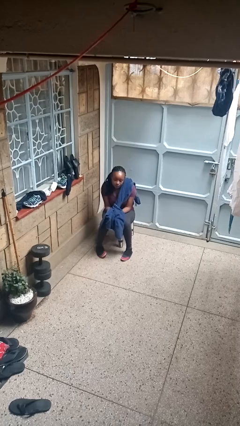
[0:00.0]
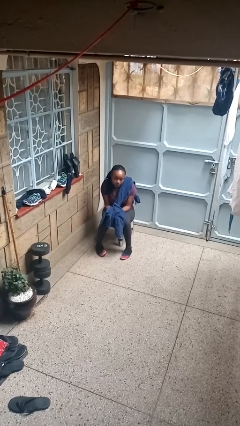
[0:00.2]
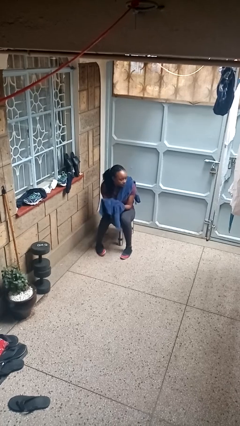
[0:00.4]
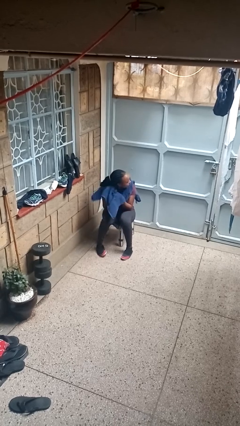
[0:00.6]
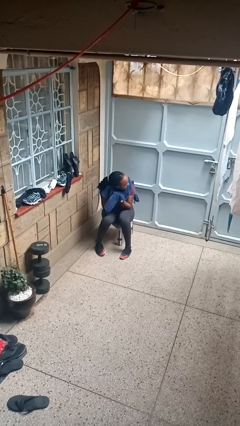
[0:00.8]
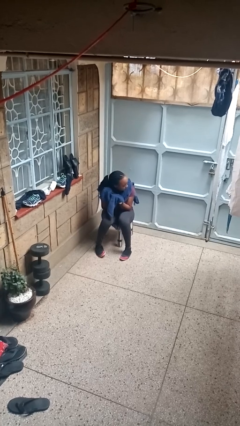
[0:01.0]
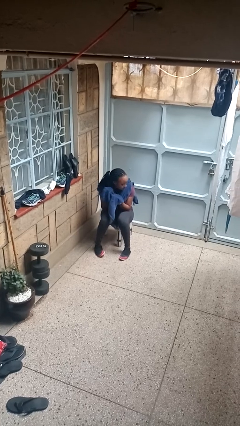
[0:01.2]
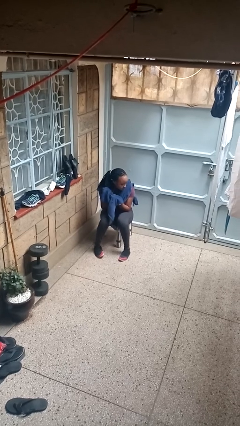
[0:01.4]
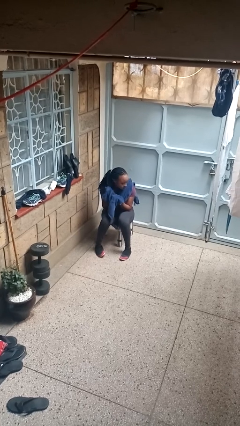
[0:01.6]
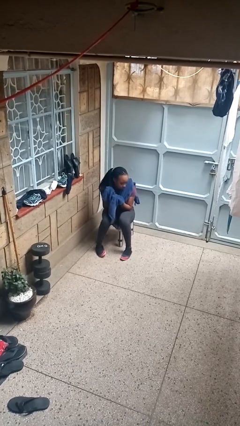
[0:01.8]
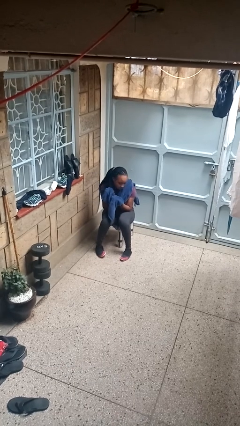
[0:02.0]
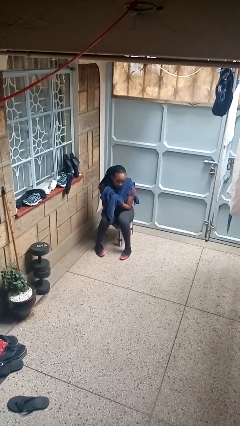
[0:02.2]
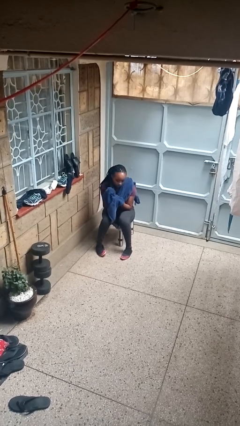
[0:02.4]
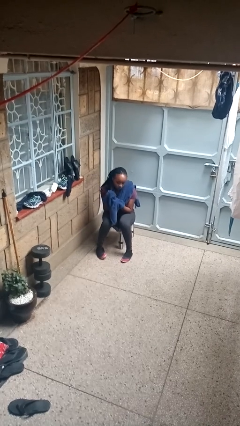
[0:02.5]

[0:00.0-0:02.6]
person dries hair with towel

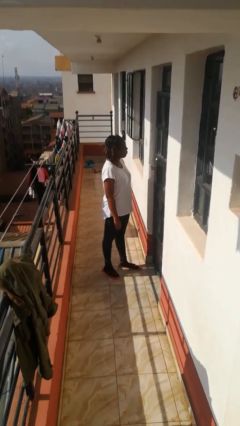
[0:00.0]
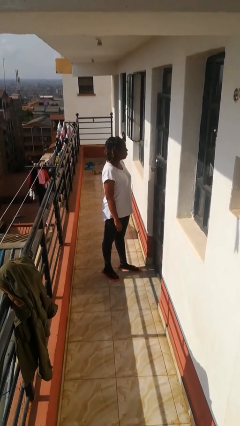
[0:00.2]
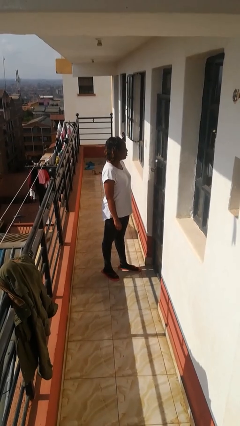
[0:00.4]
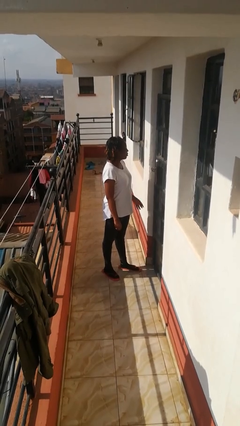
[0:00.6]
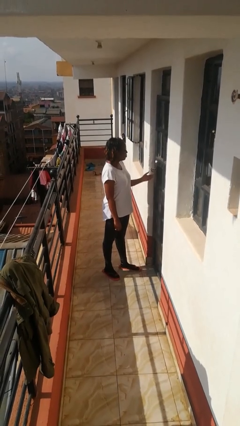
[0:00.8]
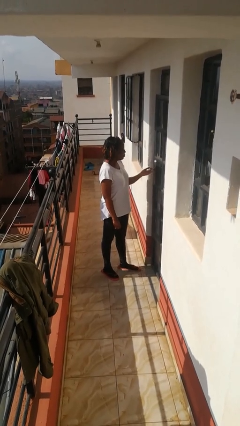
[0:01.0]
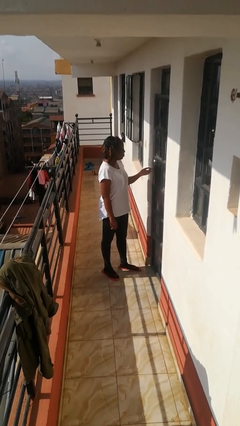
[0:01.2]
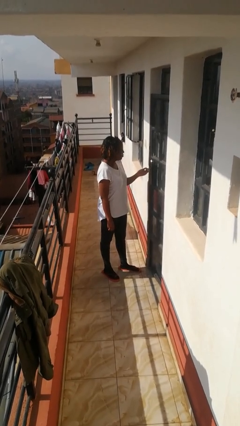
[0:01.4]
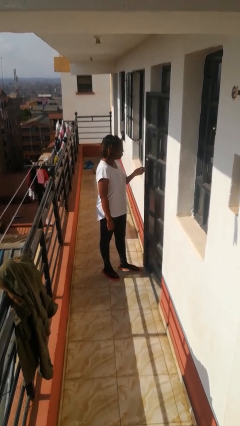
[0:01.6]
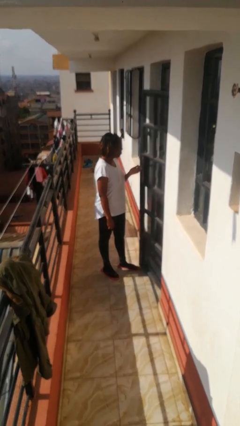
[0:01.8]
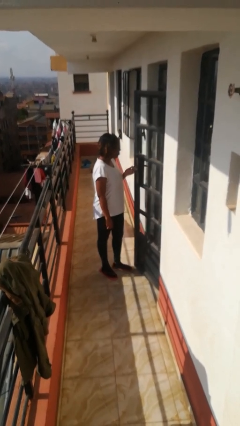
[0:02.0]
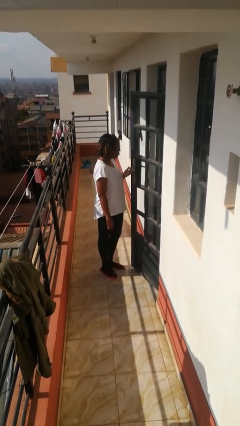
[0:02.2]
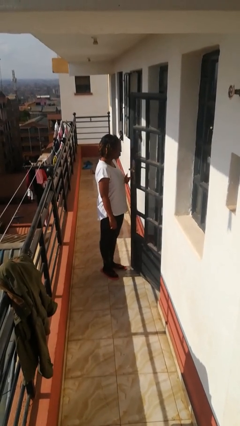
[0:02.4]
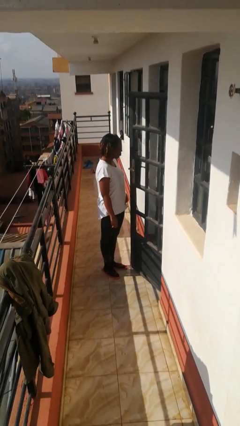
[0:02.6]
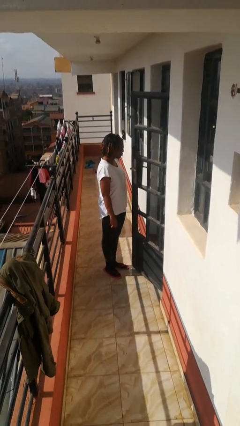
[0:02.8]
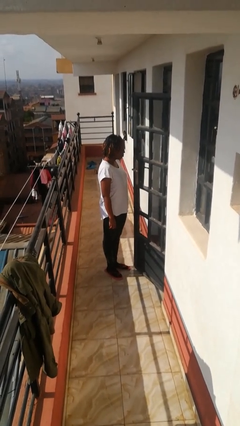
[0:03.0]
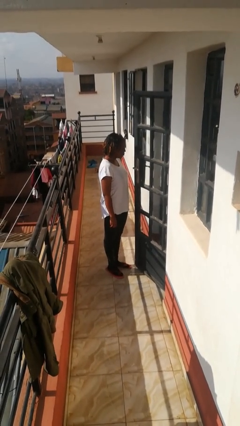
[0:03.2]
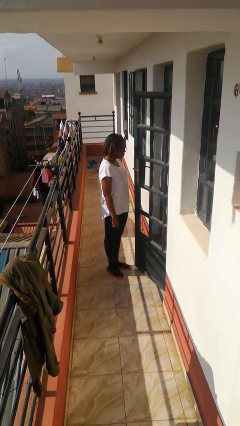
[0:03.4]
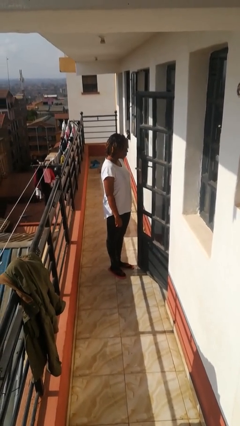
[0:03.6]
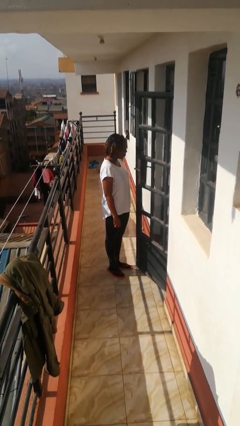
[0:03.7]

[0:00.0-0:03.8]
person opens facility door

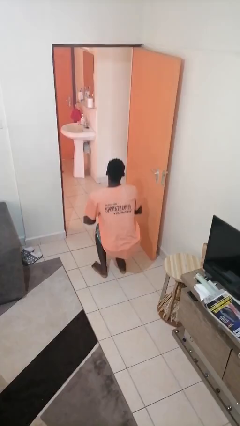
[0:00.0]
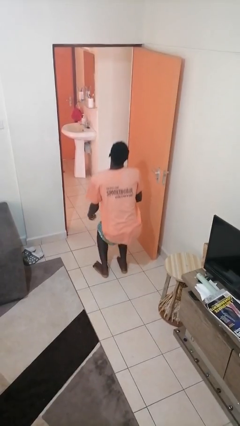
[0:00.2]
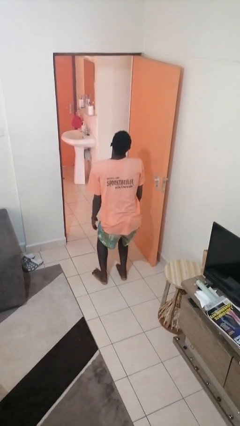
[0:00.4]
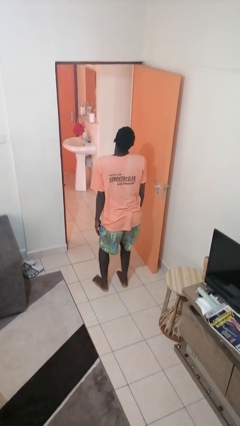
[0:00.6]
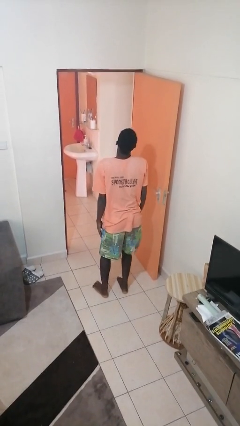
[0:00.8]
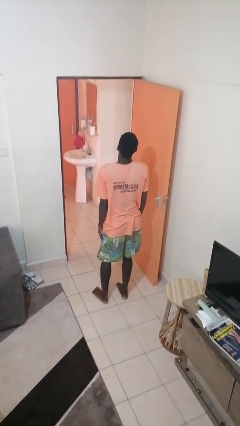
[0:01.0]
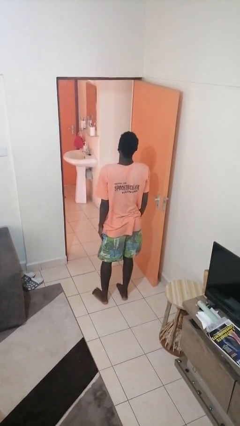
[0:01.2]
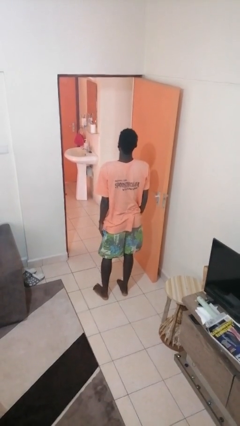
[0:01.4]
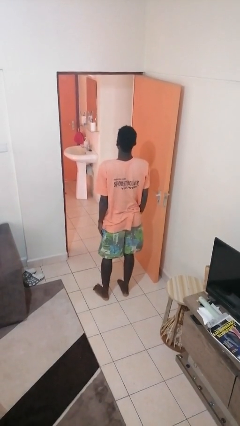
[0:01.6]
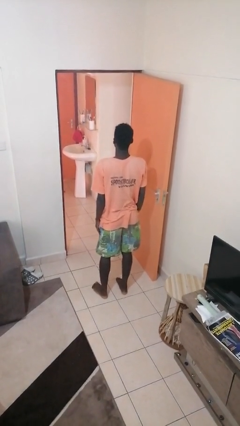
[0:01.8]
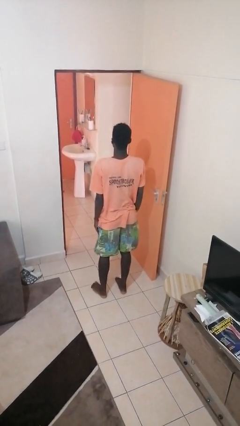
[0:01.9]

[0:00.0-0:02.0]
person stands up

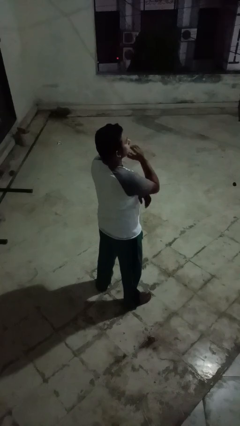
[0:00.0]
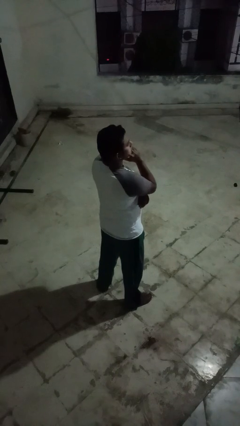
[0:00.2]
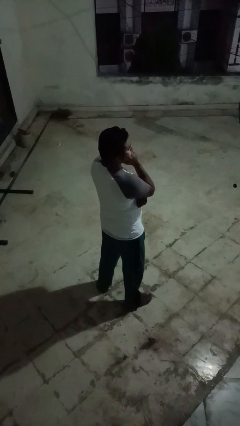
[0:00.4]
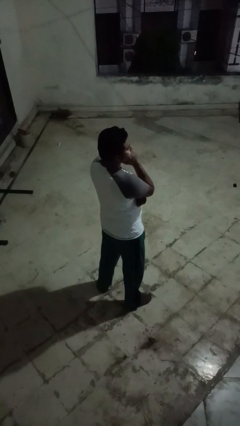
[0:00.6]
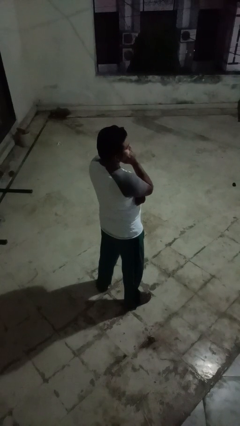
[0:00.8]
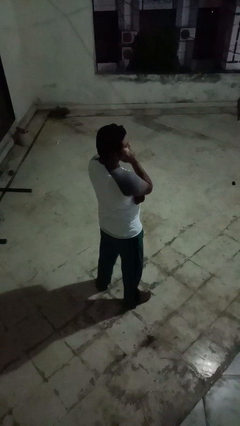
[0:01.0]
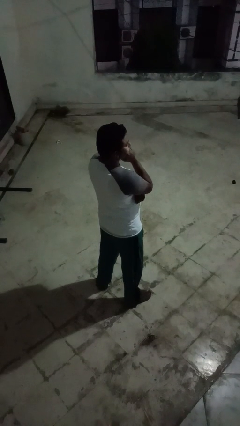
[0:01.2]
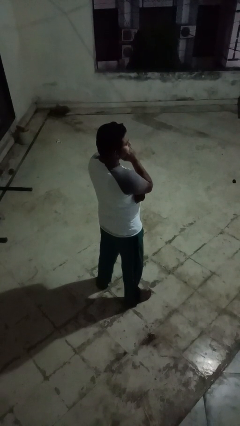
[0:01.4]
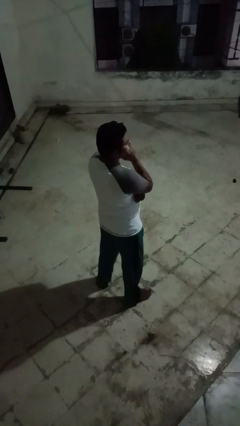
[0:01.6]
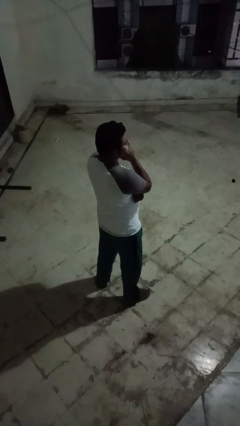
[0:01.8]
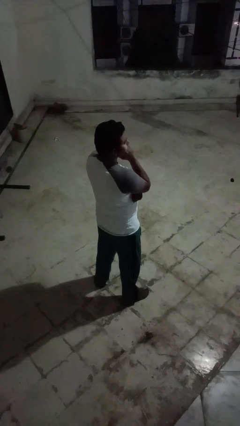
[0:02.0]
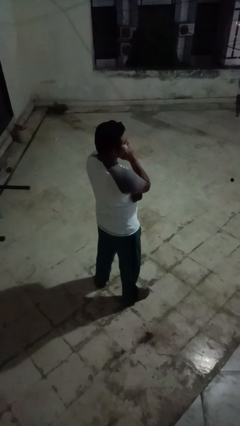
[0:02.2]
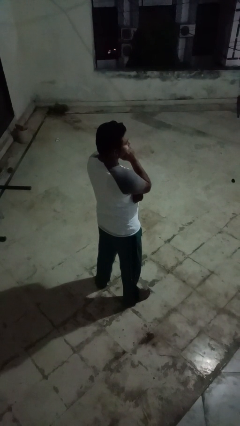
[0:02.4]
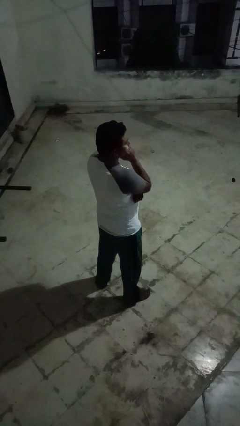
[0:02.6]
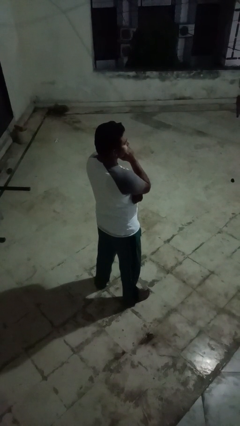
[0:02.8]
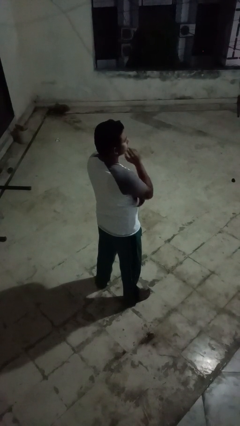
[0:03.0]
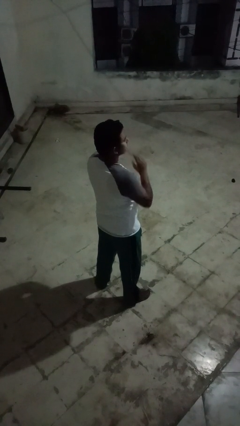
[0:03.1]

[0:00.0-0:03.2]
person strokes chin

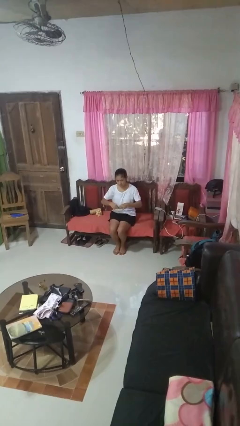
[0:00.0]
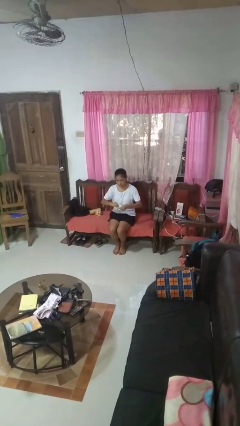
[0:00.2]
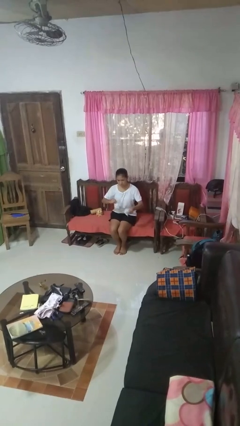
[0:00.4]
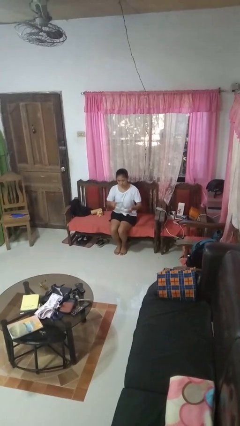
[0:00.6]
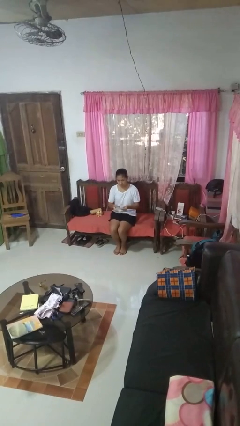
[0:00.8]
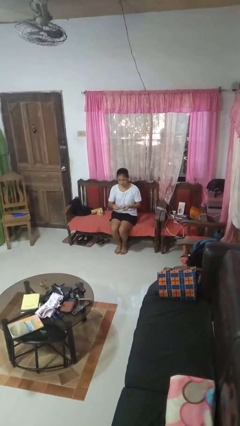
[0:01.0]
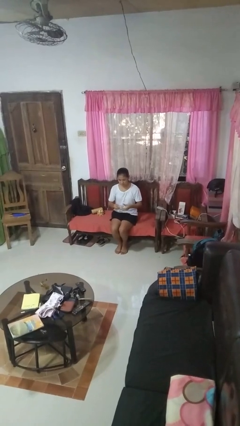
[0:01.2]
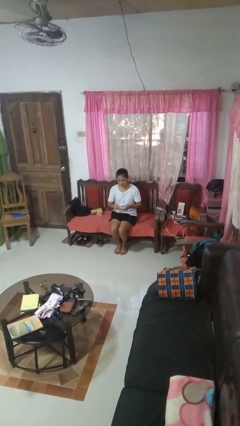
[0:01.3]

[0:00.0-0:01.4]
person tears paper

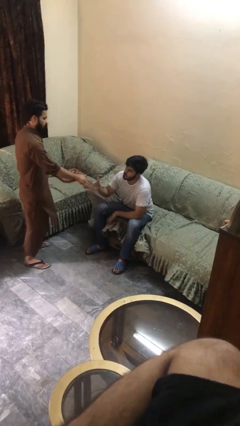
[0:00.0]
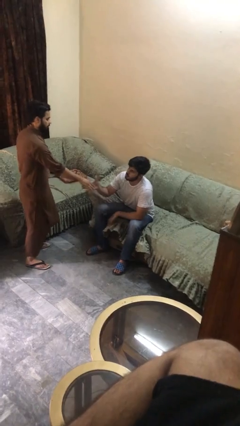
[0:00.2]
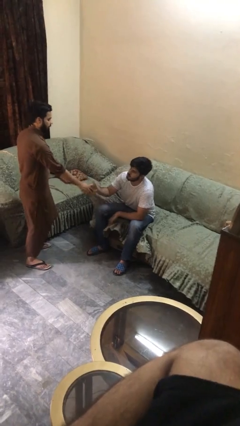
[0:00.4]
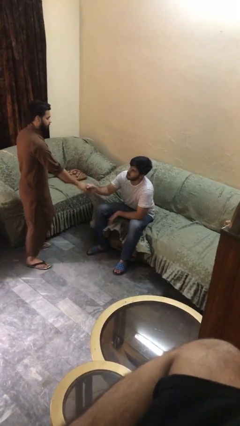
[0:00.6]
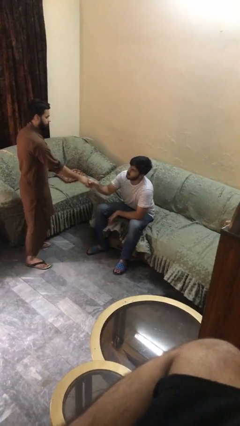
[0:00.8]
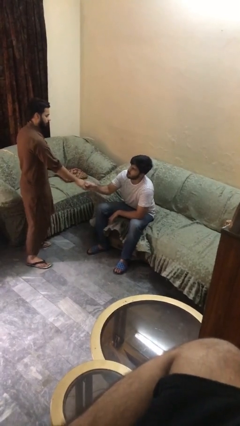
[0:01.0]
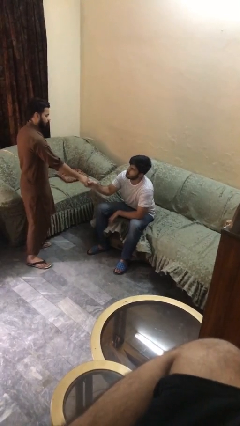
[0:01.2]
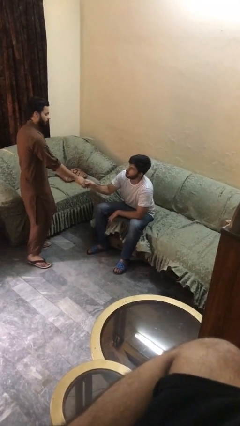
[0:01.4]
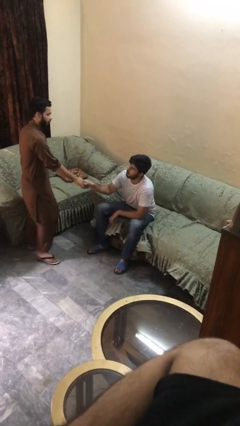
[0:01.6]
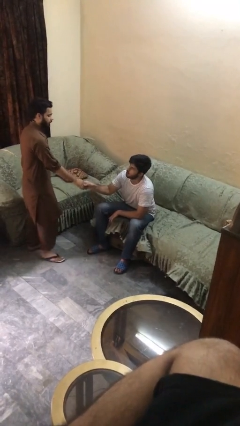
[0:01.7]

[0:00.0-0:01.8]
person shakes hand

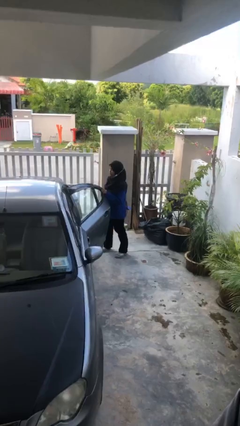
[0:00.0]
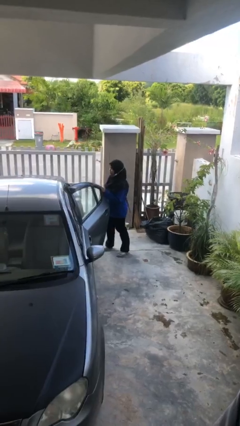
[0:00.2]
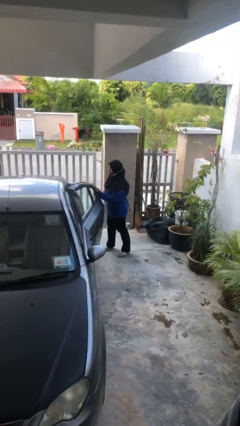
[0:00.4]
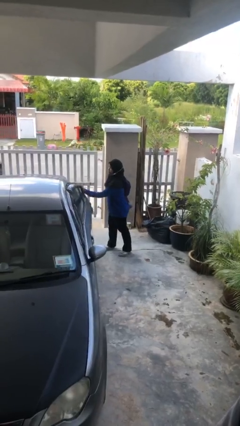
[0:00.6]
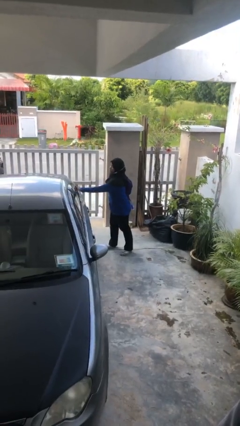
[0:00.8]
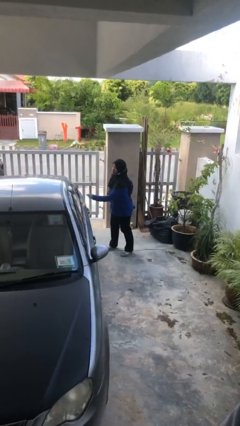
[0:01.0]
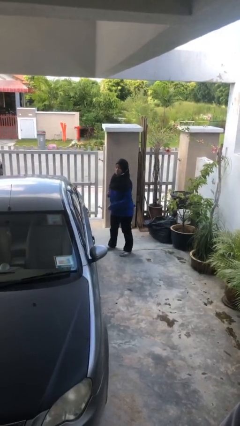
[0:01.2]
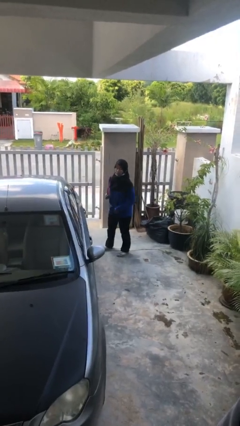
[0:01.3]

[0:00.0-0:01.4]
person closes car door

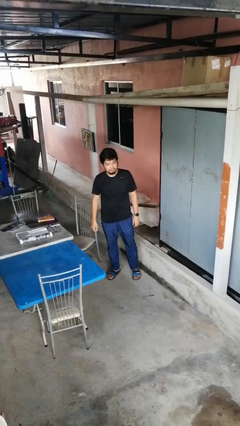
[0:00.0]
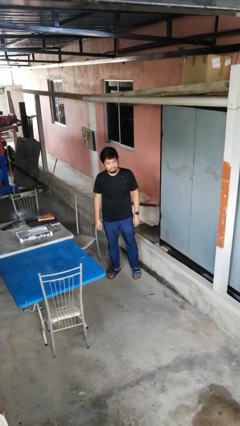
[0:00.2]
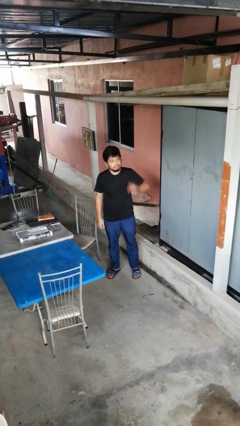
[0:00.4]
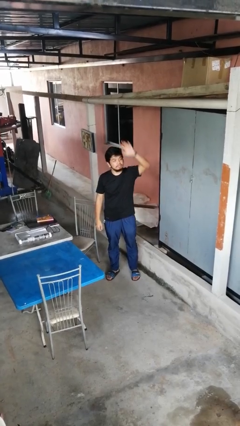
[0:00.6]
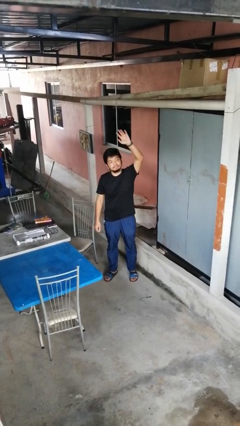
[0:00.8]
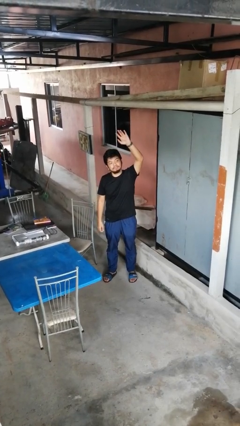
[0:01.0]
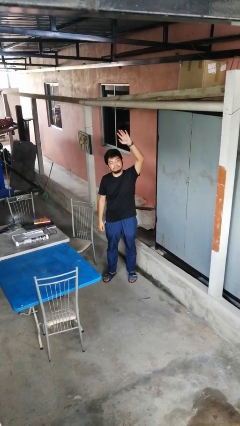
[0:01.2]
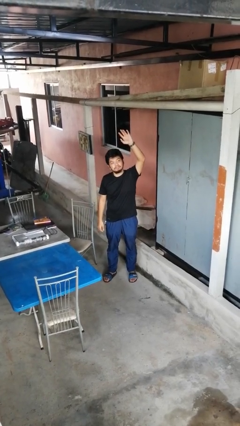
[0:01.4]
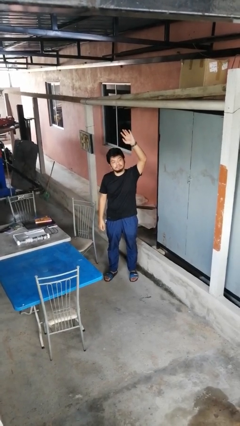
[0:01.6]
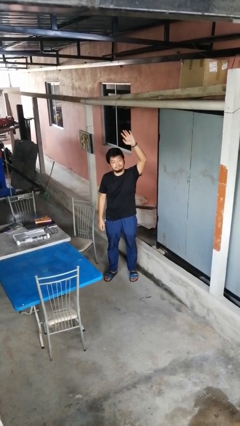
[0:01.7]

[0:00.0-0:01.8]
person gestures raise hand
